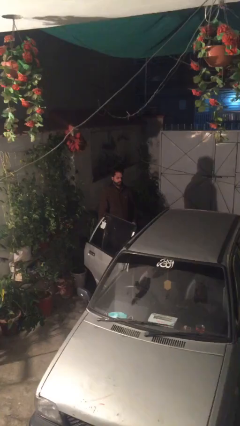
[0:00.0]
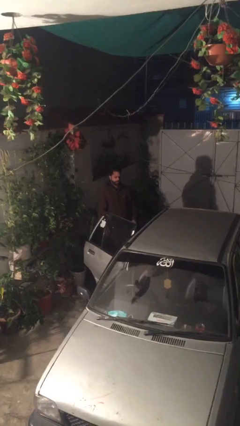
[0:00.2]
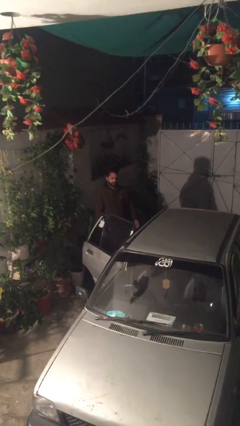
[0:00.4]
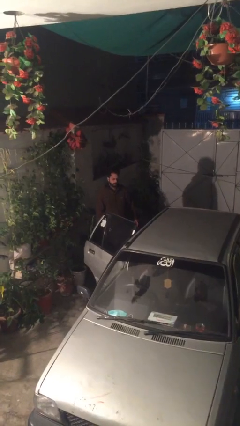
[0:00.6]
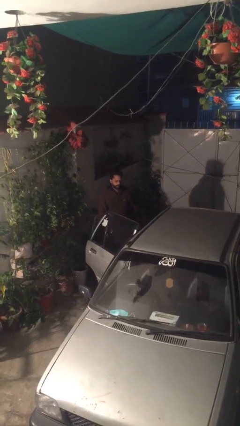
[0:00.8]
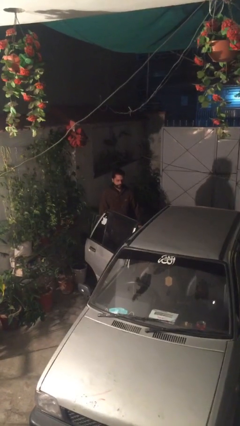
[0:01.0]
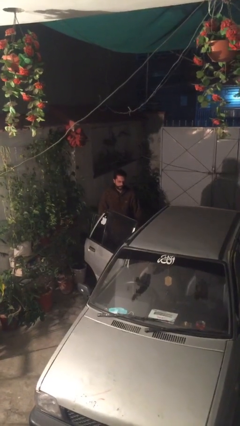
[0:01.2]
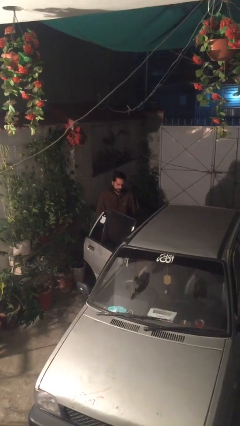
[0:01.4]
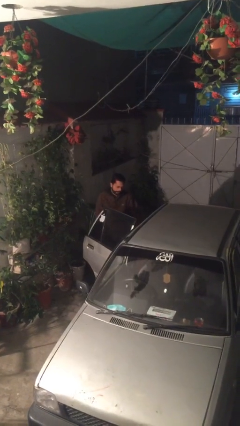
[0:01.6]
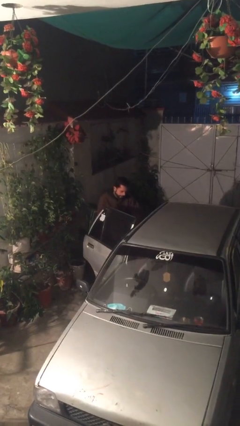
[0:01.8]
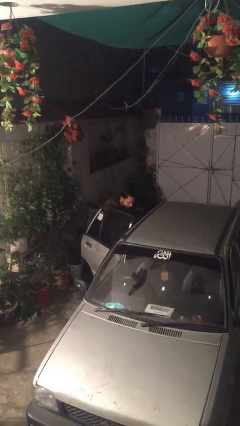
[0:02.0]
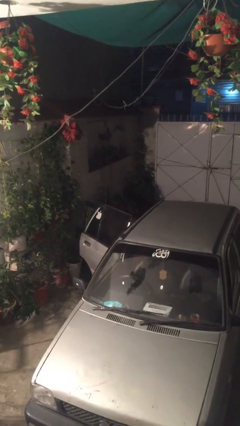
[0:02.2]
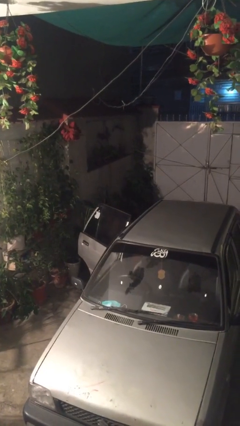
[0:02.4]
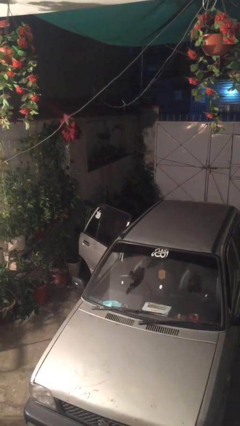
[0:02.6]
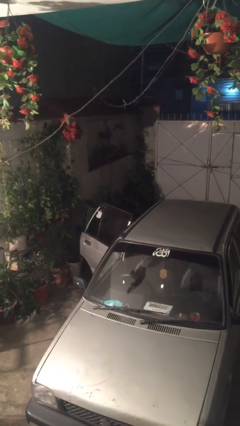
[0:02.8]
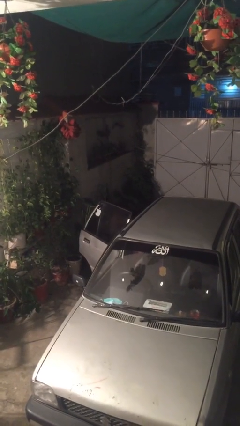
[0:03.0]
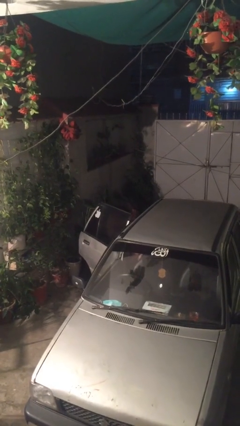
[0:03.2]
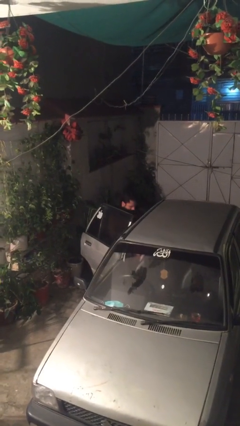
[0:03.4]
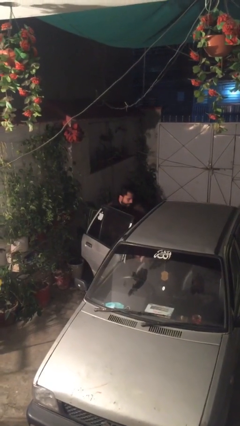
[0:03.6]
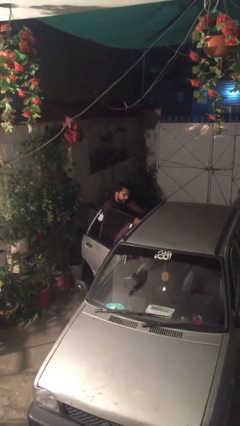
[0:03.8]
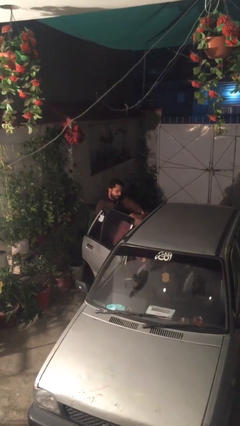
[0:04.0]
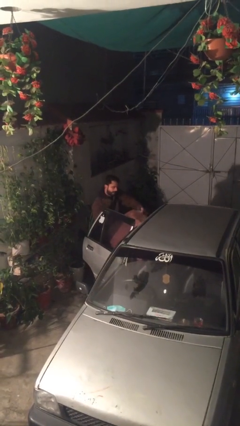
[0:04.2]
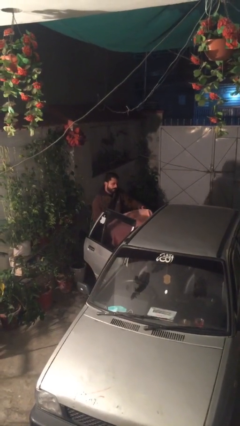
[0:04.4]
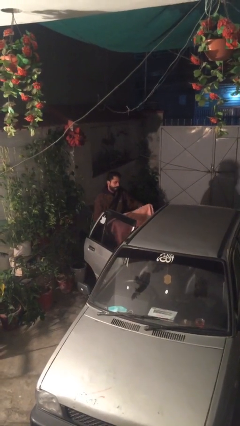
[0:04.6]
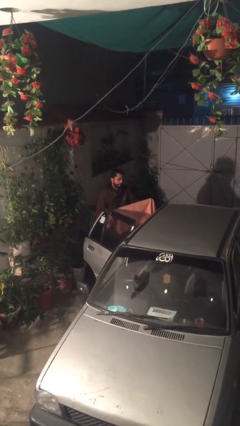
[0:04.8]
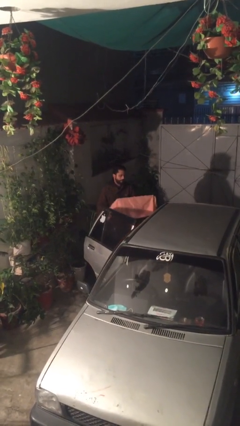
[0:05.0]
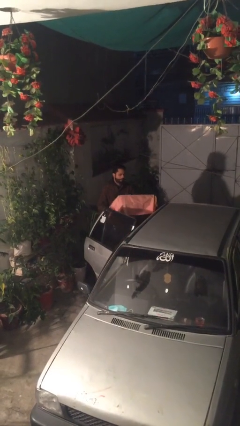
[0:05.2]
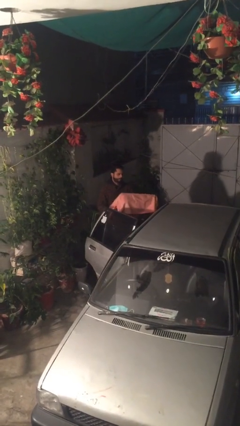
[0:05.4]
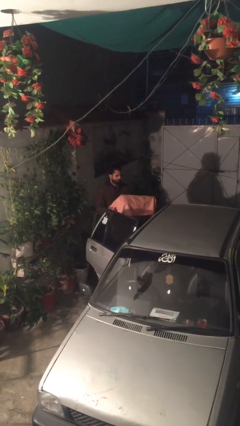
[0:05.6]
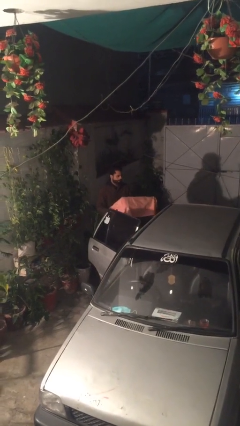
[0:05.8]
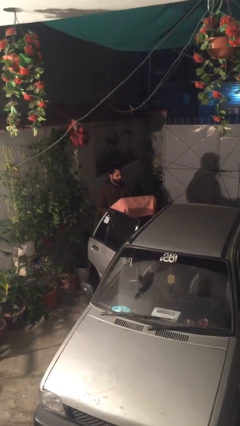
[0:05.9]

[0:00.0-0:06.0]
person unloads car

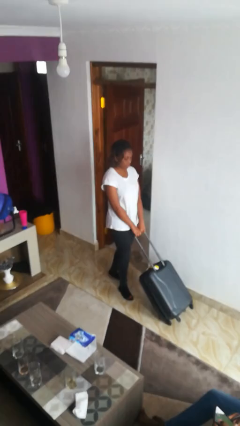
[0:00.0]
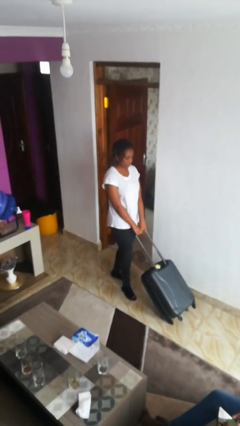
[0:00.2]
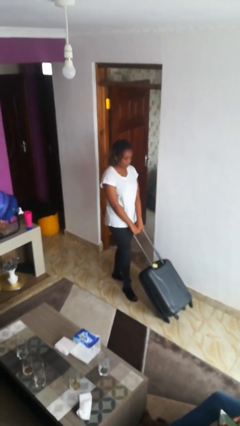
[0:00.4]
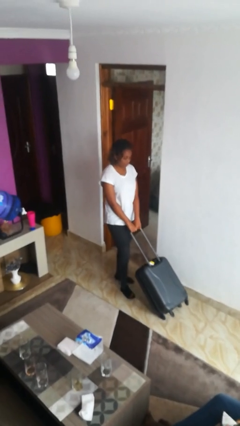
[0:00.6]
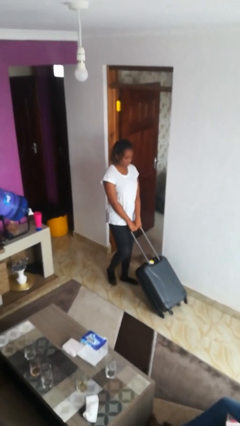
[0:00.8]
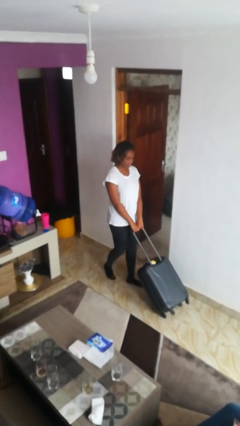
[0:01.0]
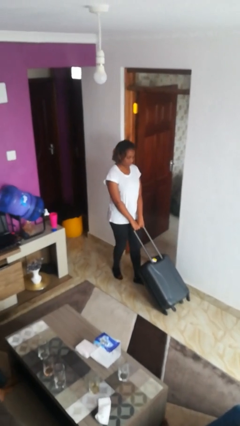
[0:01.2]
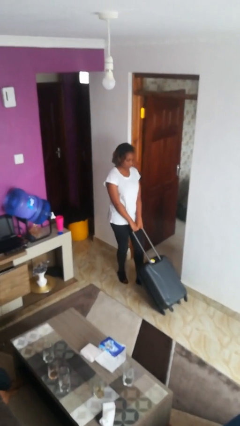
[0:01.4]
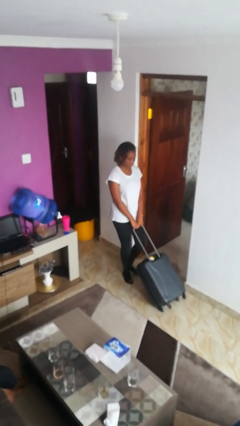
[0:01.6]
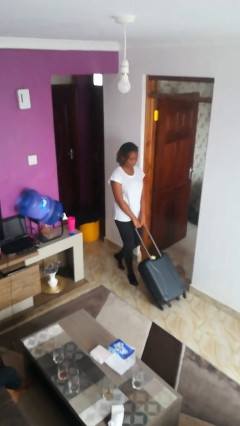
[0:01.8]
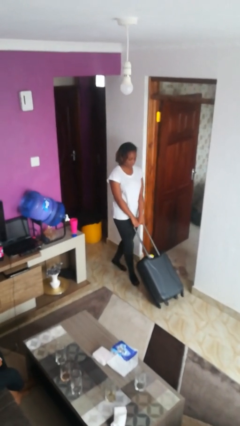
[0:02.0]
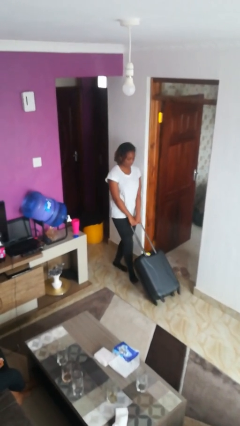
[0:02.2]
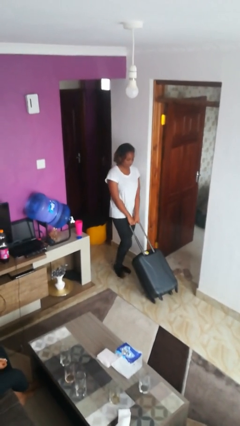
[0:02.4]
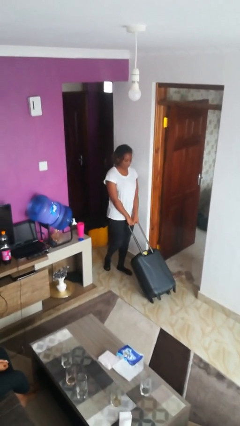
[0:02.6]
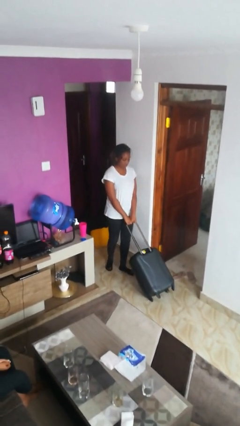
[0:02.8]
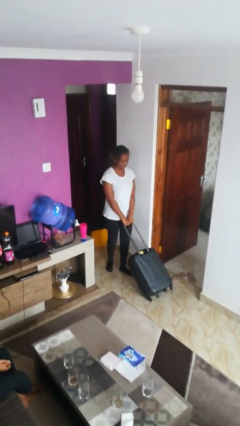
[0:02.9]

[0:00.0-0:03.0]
person pulls wheeled cart

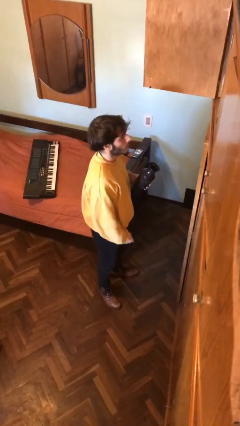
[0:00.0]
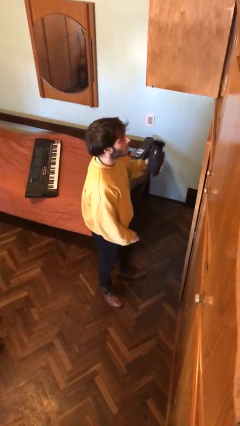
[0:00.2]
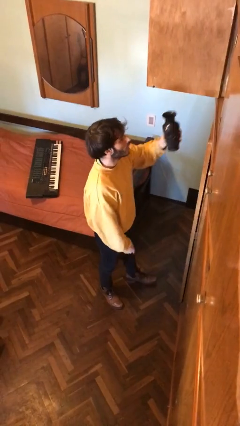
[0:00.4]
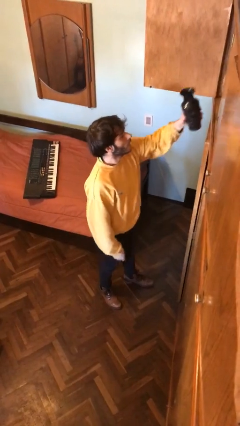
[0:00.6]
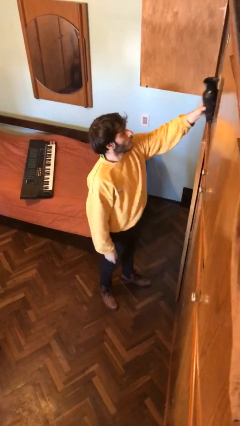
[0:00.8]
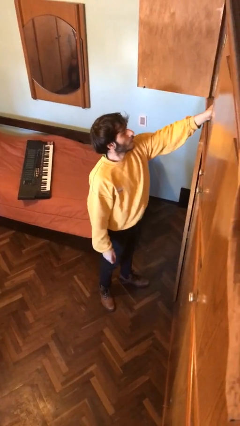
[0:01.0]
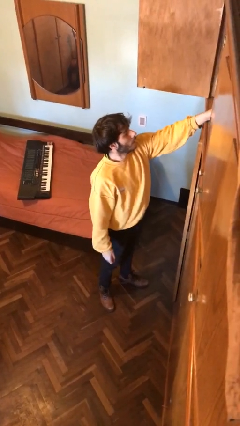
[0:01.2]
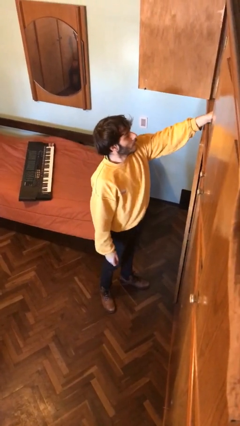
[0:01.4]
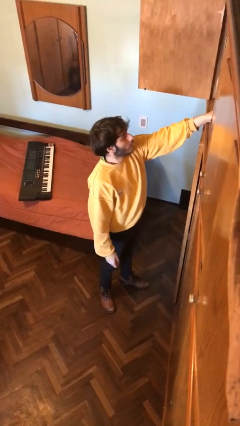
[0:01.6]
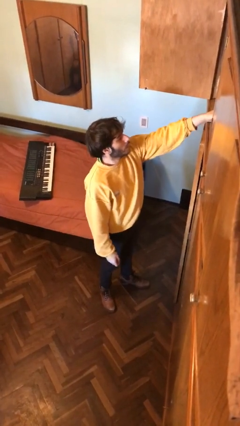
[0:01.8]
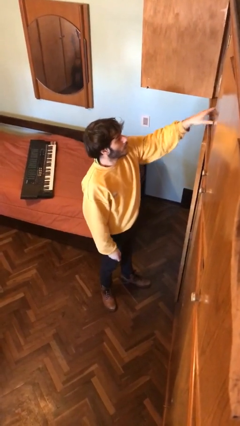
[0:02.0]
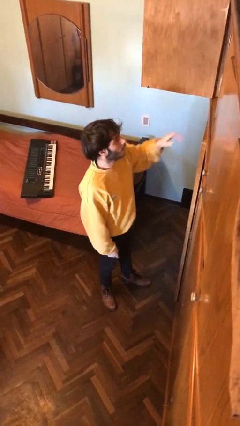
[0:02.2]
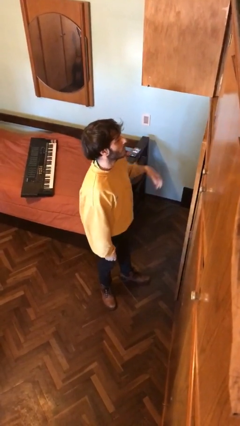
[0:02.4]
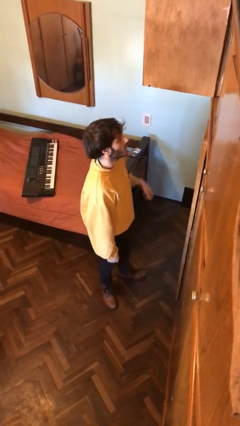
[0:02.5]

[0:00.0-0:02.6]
person puts down object into cabinet

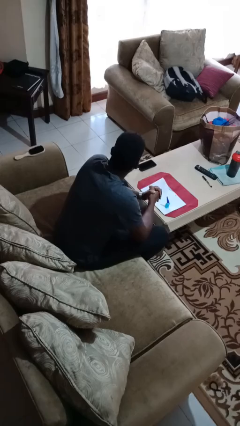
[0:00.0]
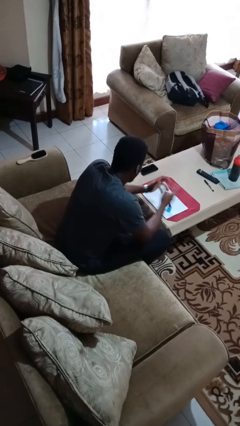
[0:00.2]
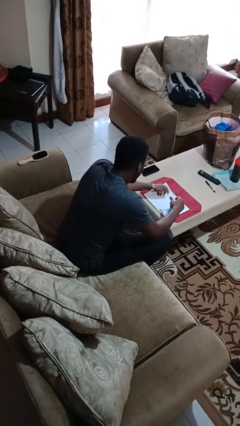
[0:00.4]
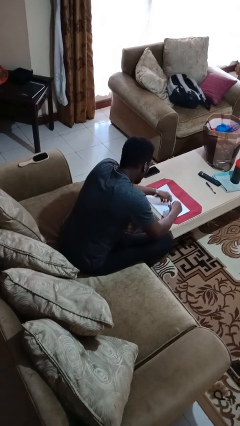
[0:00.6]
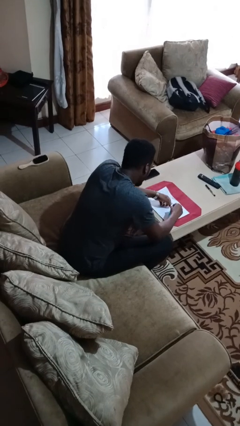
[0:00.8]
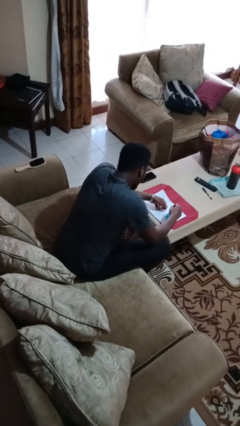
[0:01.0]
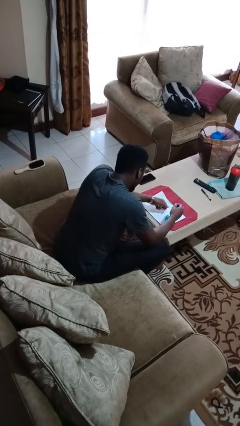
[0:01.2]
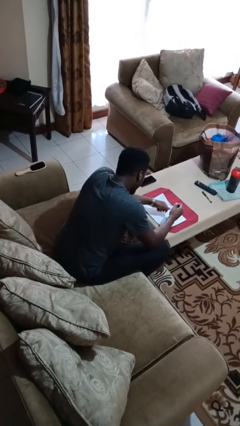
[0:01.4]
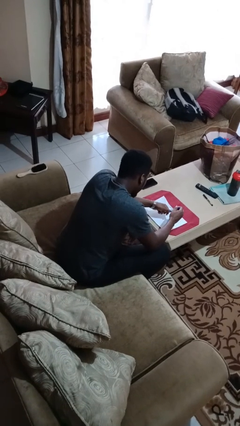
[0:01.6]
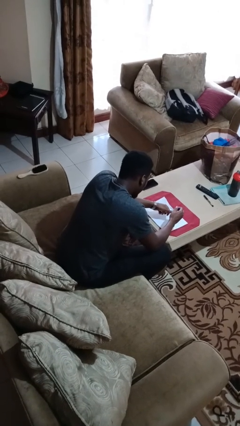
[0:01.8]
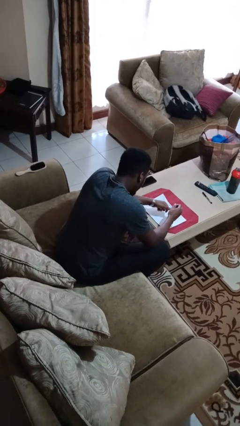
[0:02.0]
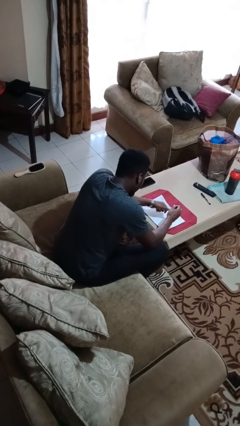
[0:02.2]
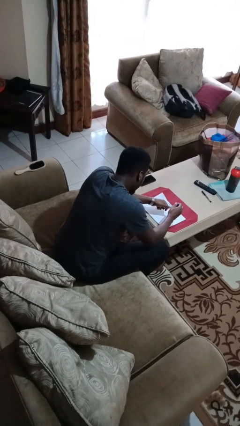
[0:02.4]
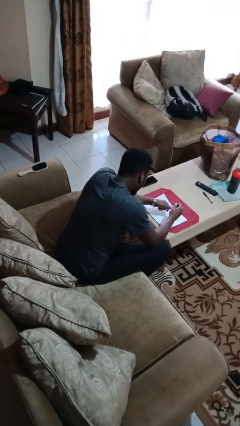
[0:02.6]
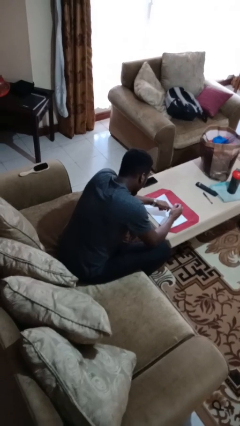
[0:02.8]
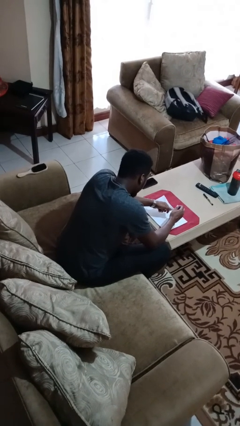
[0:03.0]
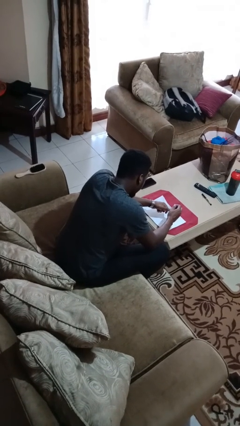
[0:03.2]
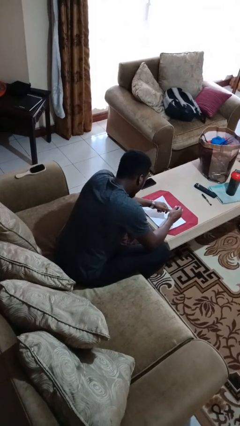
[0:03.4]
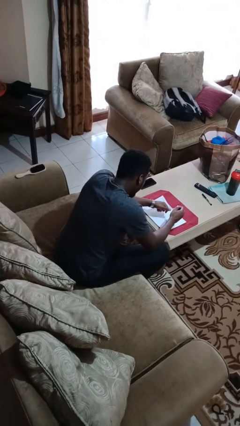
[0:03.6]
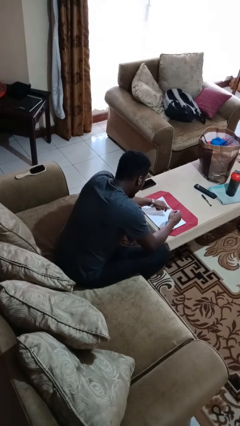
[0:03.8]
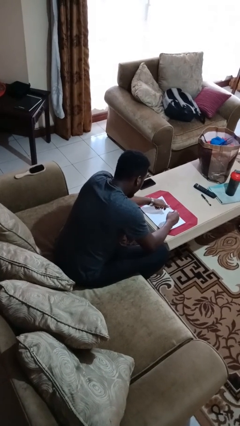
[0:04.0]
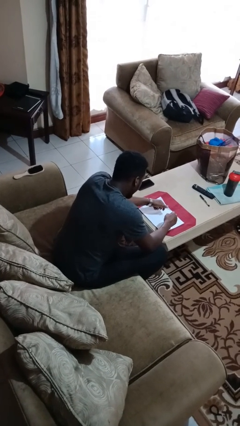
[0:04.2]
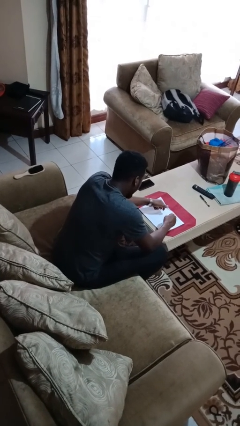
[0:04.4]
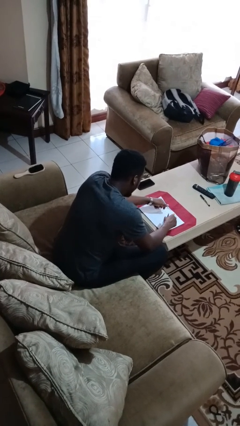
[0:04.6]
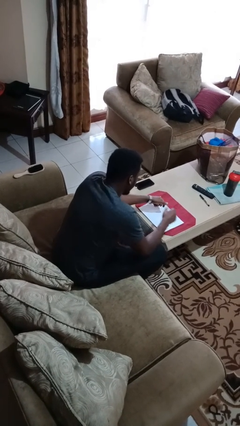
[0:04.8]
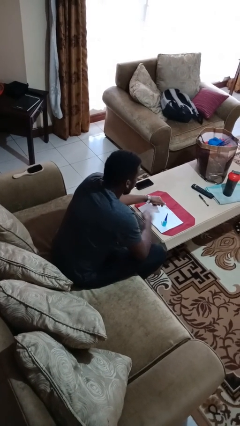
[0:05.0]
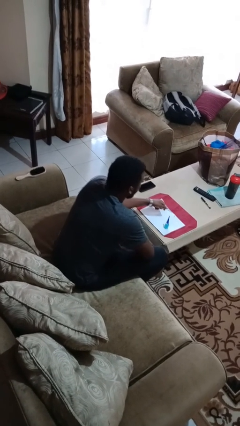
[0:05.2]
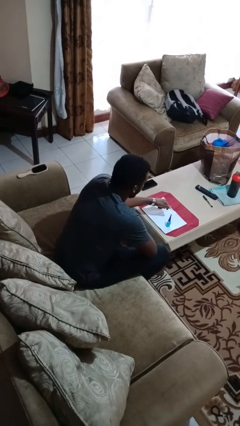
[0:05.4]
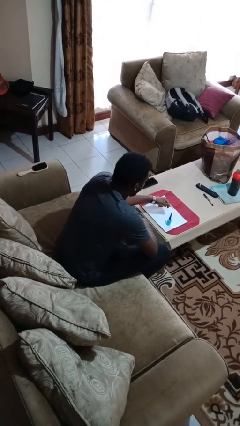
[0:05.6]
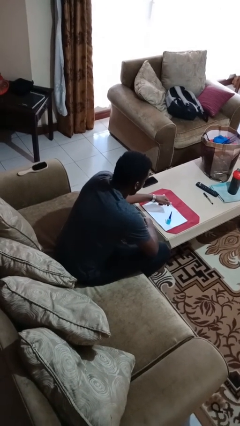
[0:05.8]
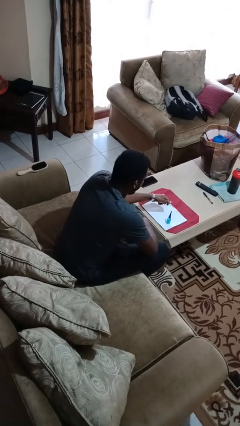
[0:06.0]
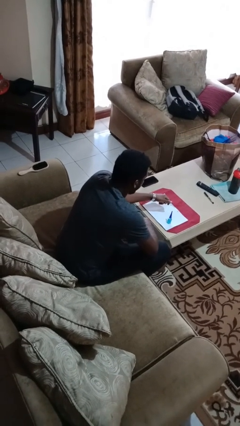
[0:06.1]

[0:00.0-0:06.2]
person paints fingernails
